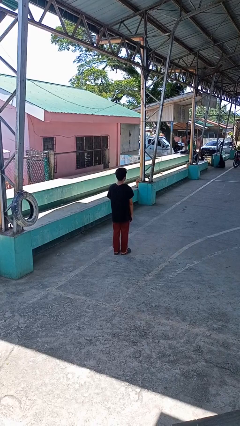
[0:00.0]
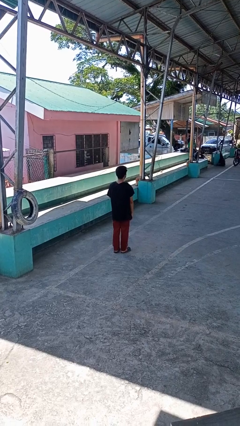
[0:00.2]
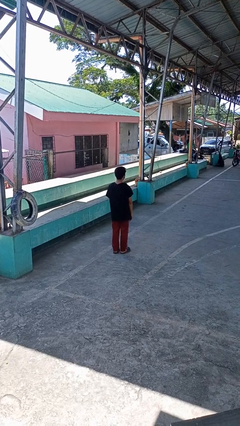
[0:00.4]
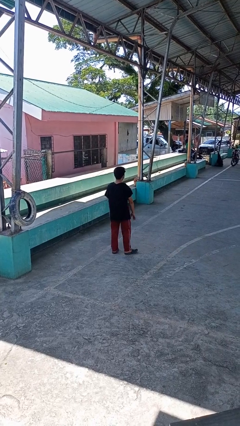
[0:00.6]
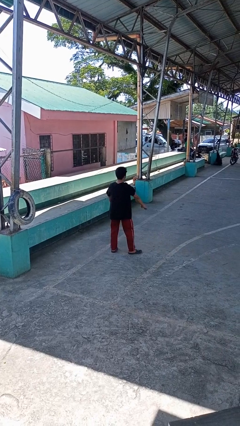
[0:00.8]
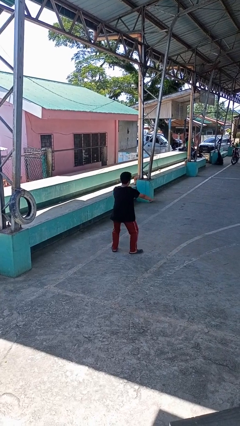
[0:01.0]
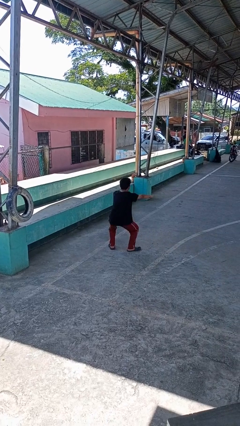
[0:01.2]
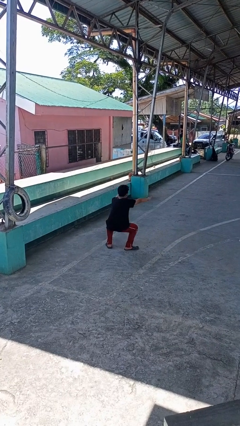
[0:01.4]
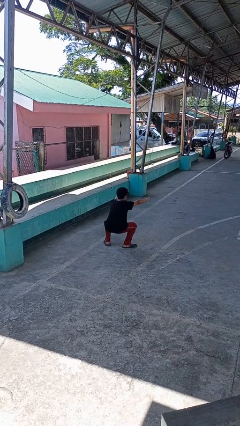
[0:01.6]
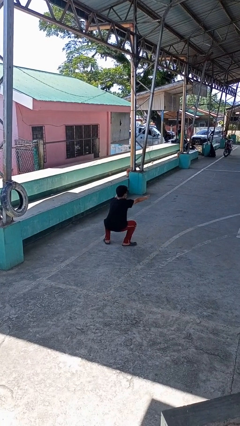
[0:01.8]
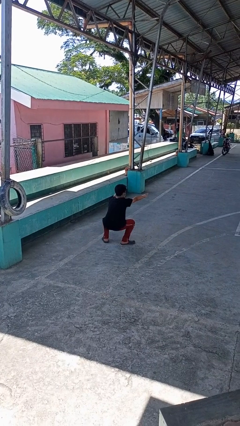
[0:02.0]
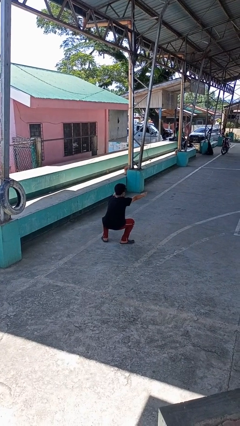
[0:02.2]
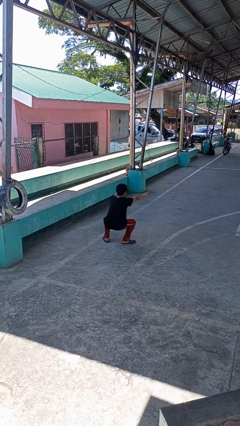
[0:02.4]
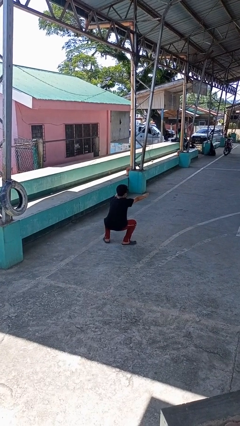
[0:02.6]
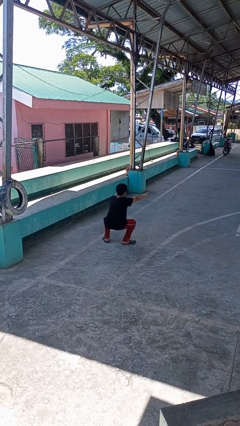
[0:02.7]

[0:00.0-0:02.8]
person squats

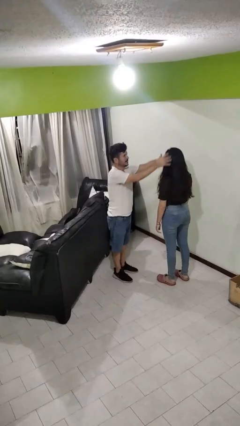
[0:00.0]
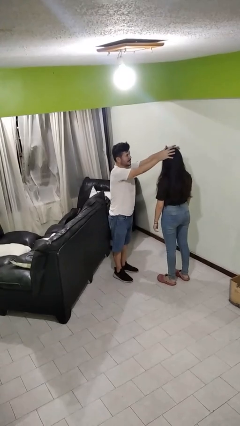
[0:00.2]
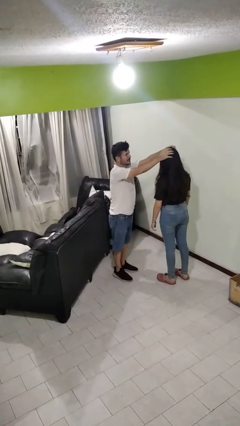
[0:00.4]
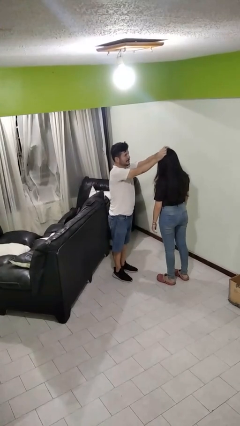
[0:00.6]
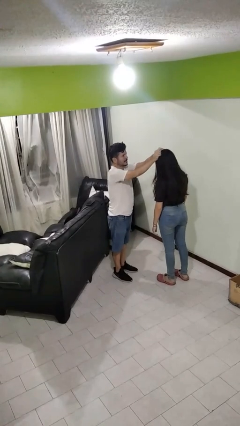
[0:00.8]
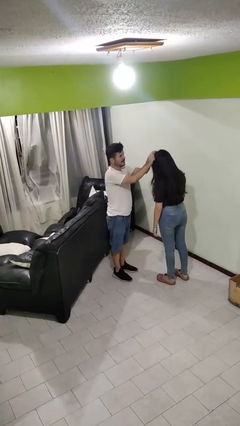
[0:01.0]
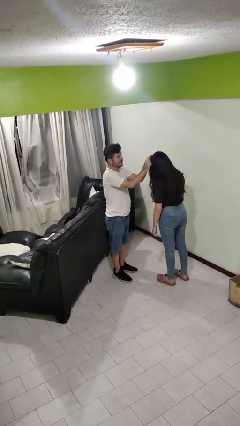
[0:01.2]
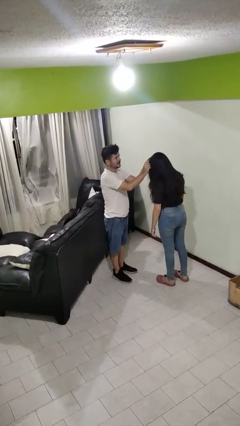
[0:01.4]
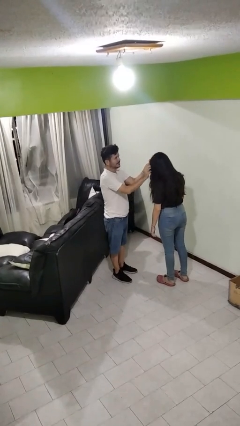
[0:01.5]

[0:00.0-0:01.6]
person grabs person by hair

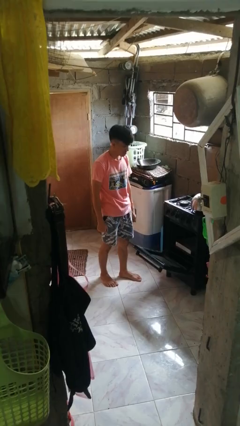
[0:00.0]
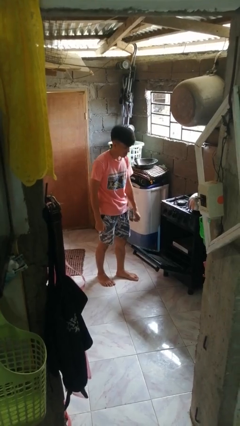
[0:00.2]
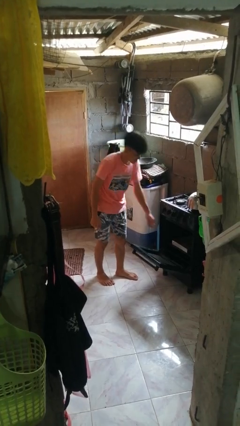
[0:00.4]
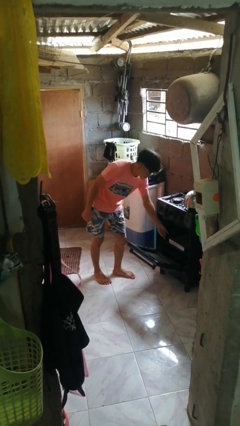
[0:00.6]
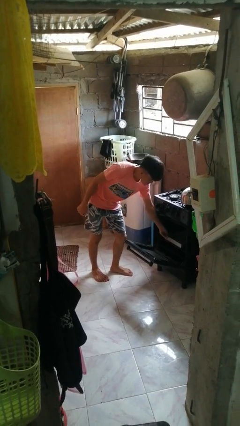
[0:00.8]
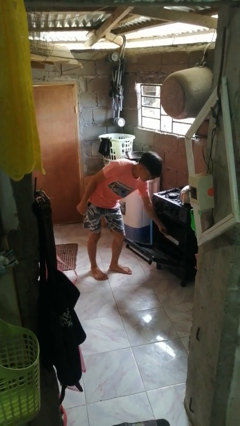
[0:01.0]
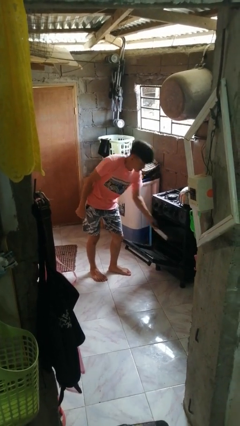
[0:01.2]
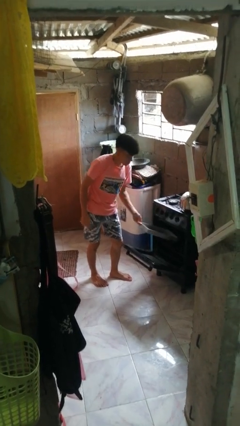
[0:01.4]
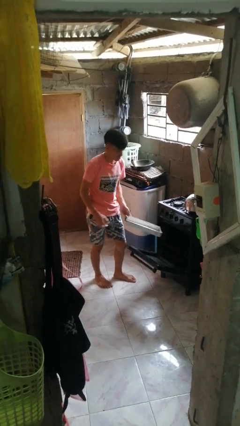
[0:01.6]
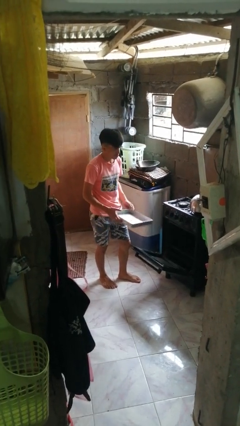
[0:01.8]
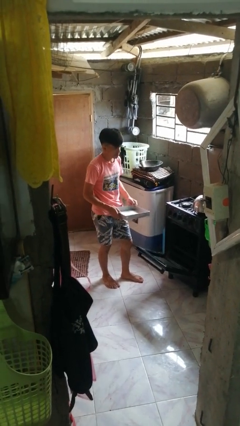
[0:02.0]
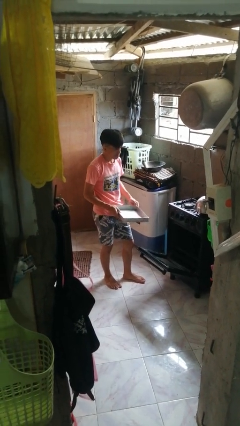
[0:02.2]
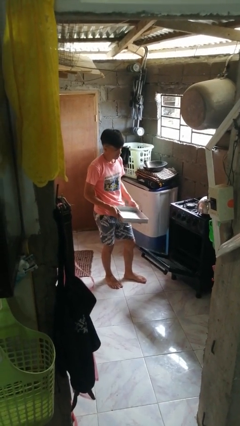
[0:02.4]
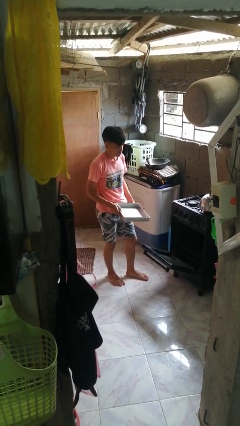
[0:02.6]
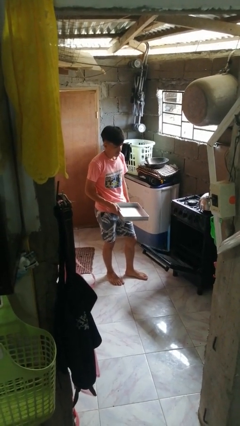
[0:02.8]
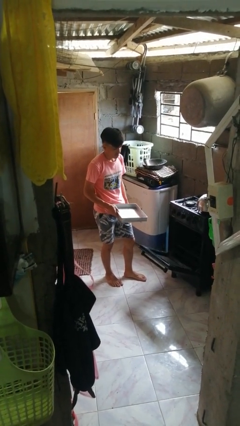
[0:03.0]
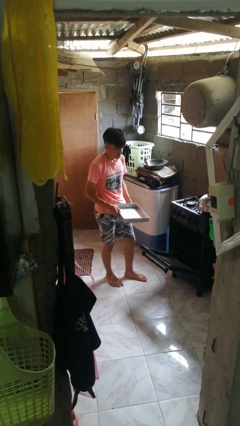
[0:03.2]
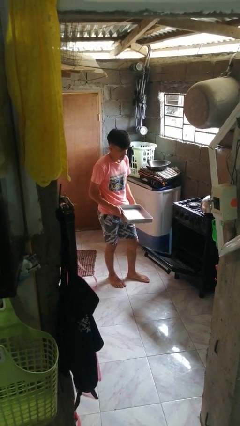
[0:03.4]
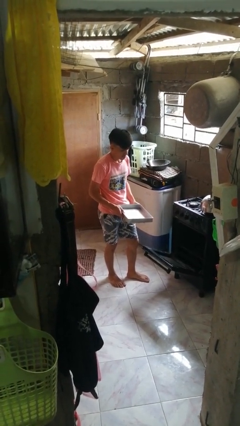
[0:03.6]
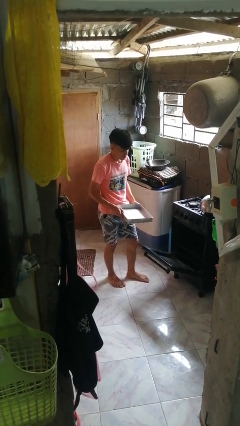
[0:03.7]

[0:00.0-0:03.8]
person takes object from oven

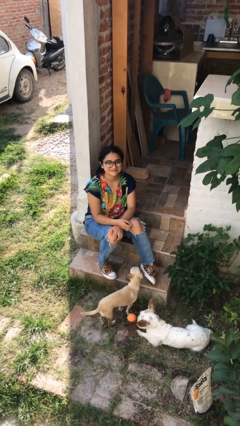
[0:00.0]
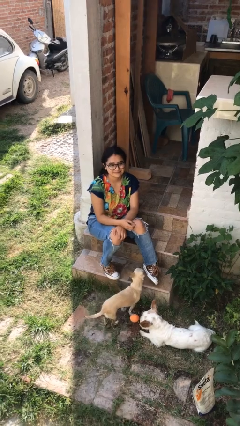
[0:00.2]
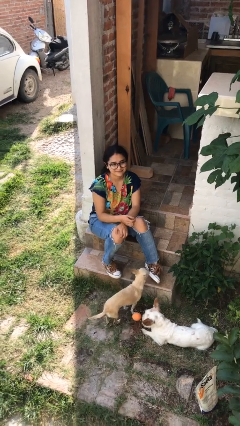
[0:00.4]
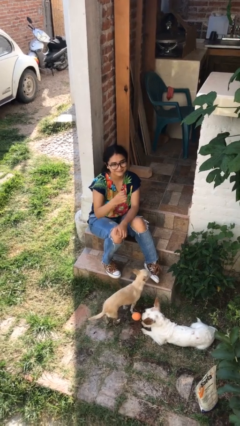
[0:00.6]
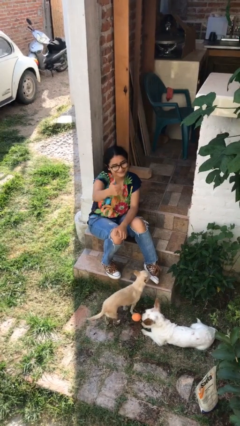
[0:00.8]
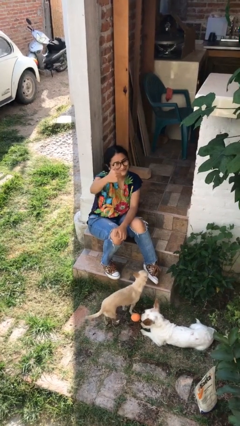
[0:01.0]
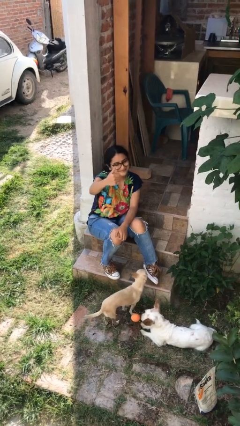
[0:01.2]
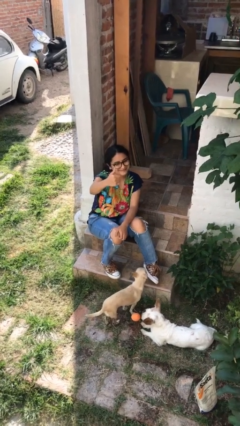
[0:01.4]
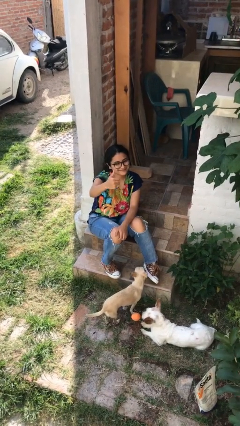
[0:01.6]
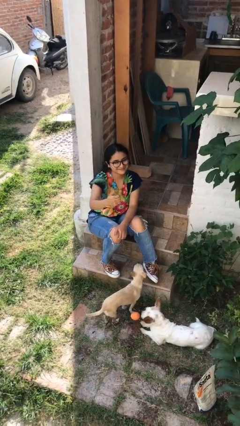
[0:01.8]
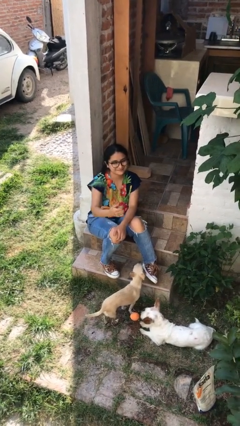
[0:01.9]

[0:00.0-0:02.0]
person gestures thumbs up

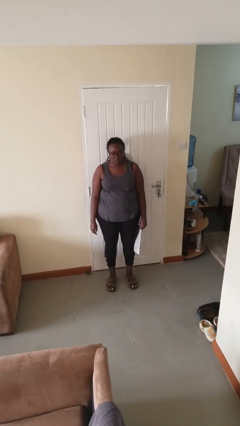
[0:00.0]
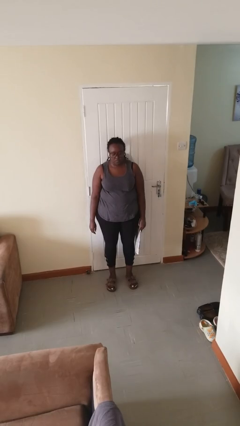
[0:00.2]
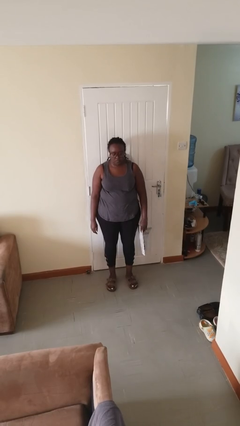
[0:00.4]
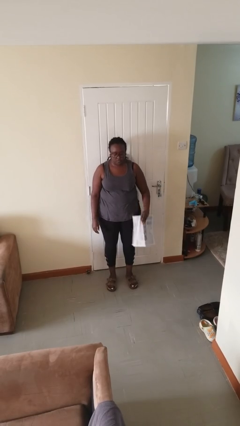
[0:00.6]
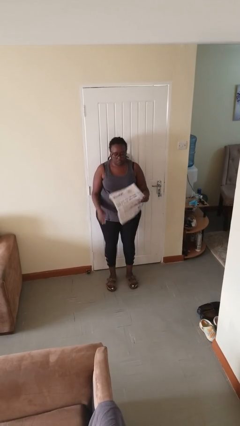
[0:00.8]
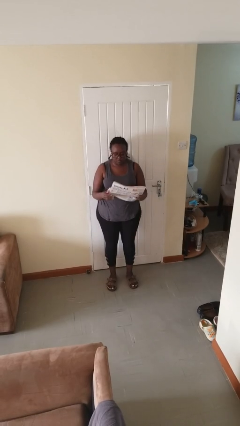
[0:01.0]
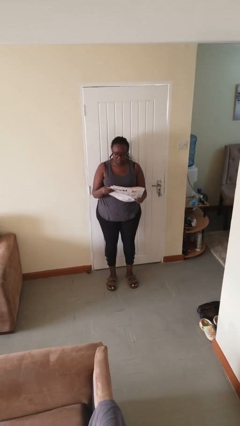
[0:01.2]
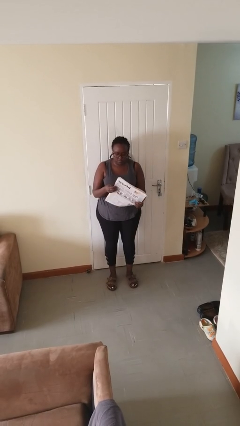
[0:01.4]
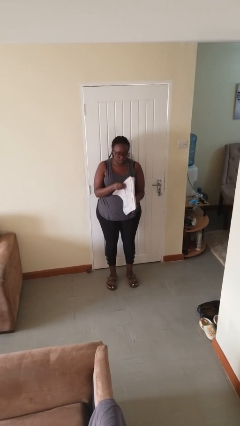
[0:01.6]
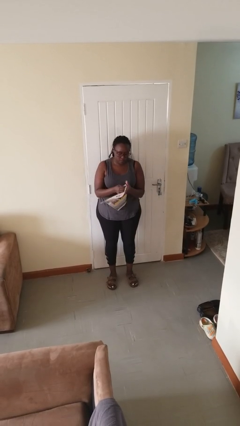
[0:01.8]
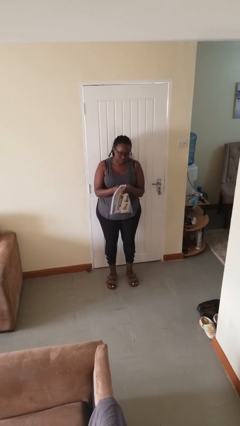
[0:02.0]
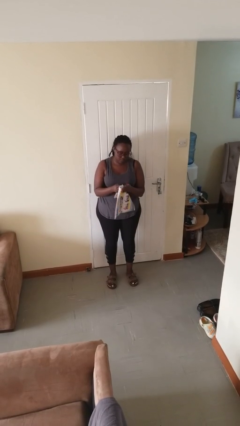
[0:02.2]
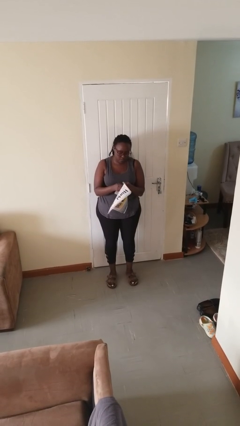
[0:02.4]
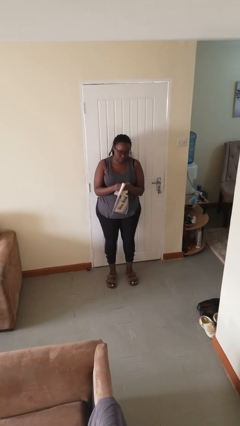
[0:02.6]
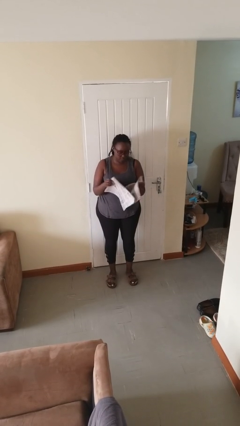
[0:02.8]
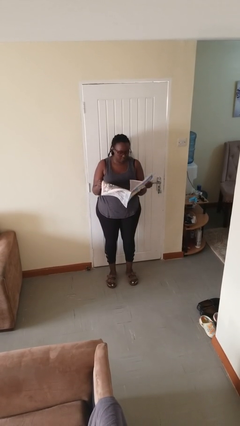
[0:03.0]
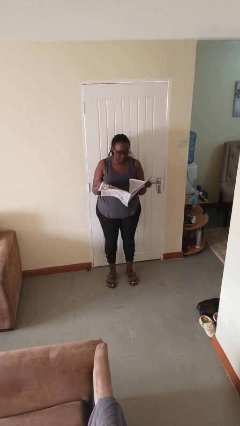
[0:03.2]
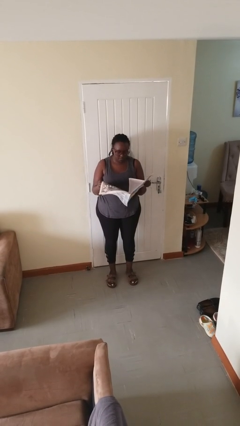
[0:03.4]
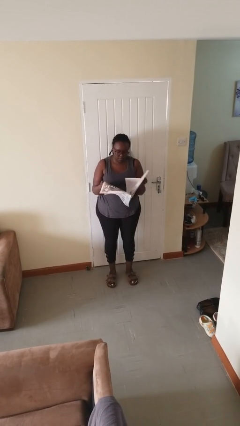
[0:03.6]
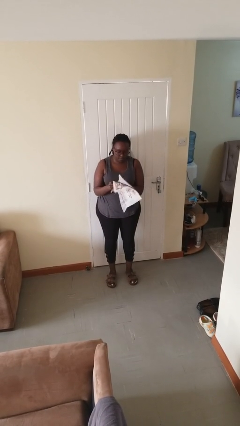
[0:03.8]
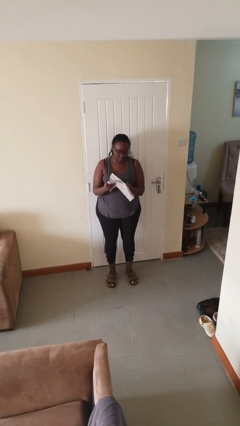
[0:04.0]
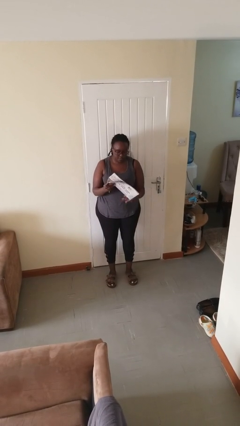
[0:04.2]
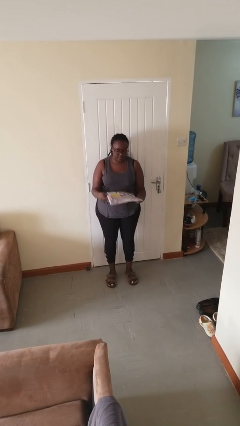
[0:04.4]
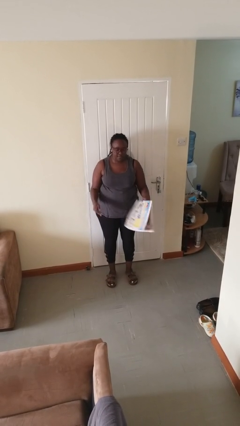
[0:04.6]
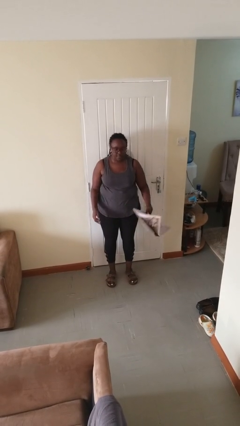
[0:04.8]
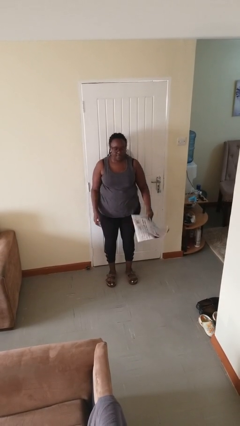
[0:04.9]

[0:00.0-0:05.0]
person reads newspaper

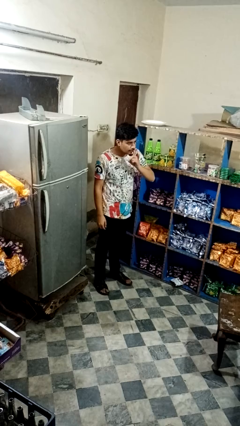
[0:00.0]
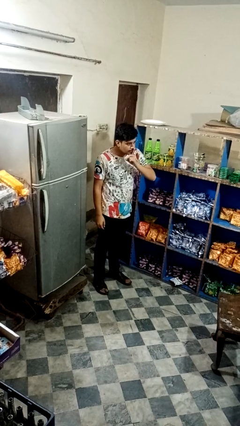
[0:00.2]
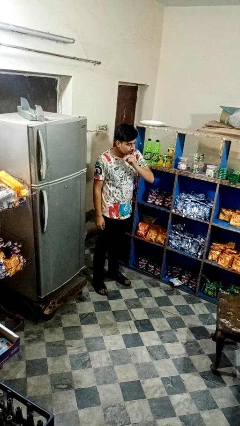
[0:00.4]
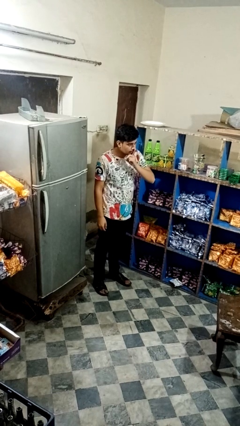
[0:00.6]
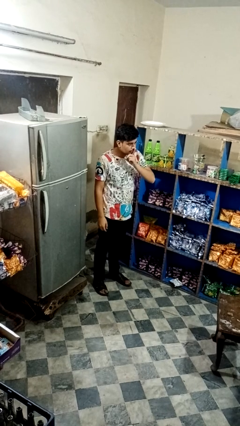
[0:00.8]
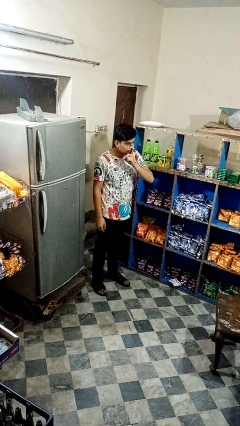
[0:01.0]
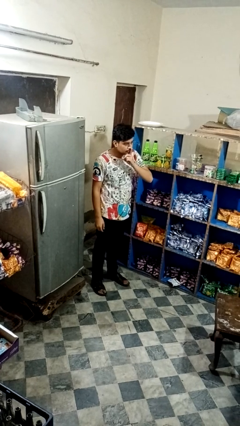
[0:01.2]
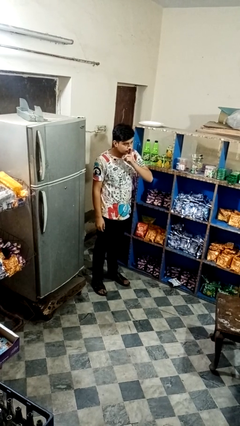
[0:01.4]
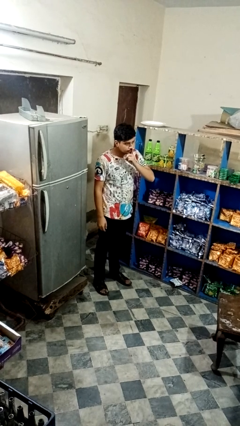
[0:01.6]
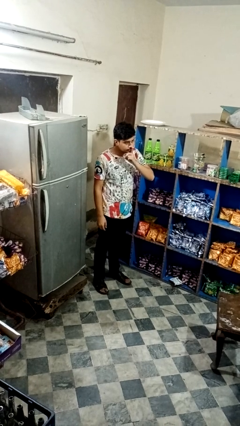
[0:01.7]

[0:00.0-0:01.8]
person gestures be quiet
